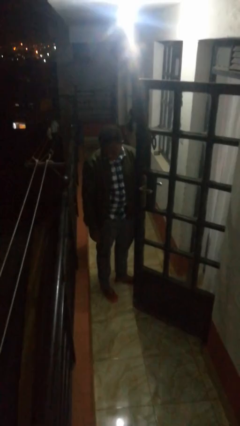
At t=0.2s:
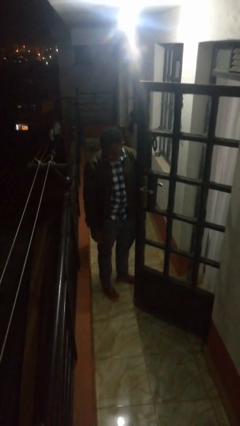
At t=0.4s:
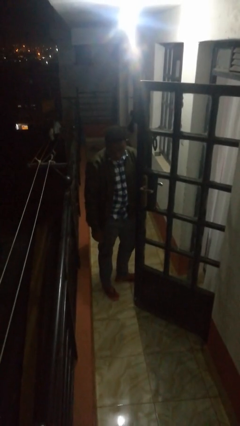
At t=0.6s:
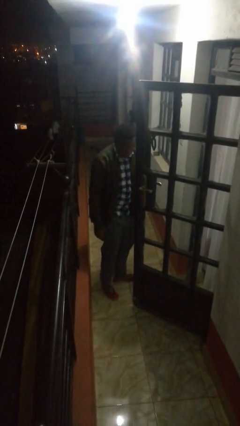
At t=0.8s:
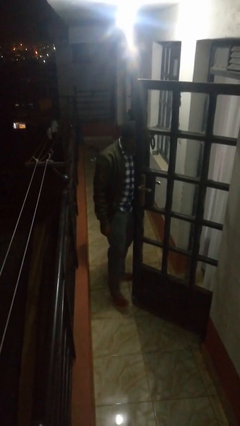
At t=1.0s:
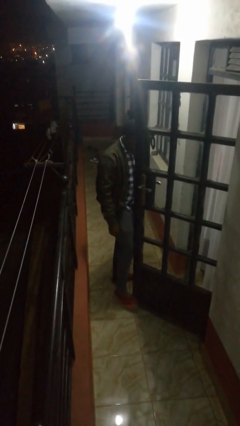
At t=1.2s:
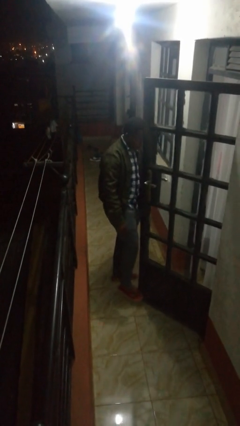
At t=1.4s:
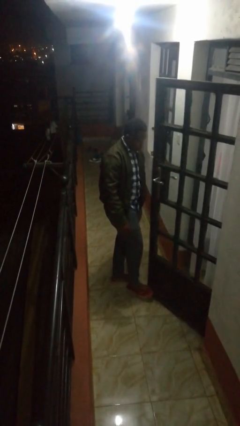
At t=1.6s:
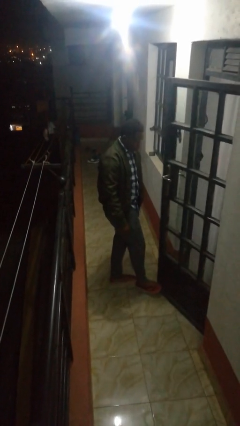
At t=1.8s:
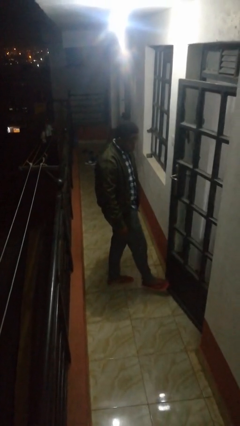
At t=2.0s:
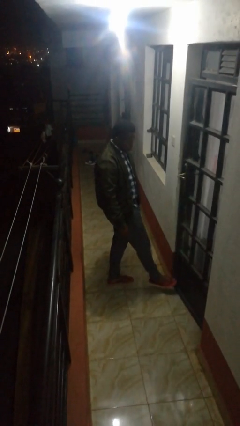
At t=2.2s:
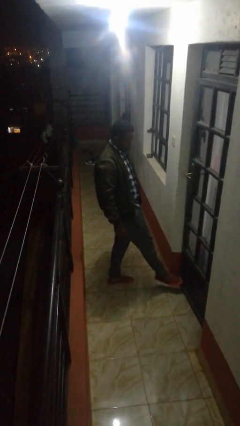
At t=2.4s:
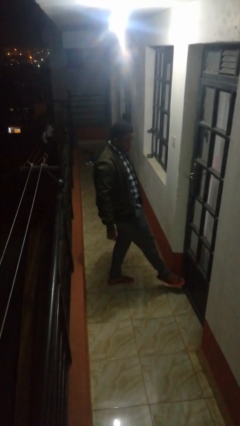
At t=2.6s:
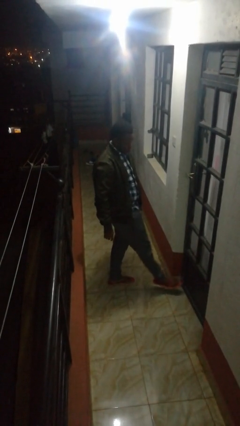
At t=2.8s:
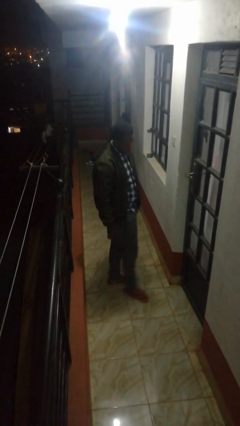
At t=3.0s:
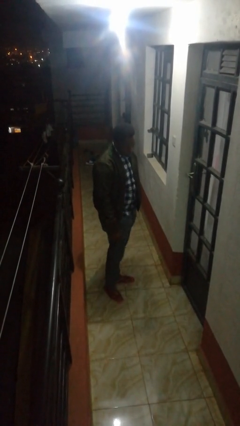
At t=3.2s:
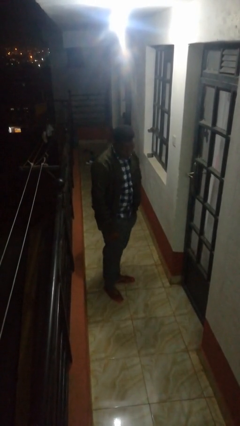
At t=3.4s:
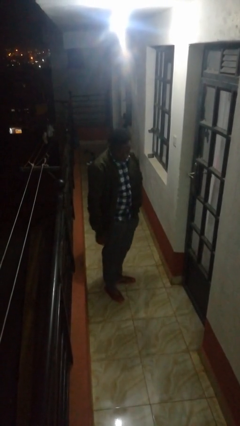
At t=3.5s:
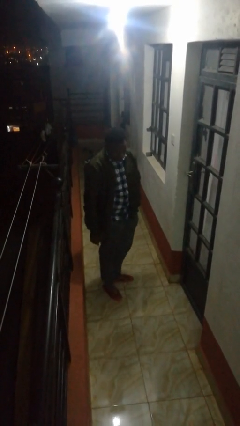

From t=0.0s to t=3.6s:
person closes door with foot

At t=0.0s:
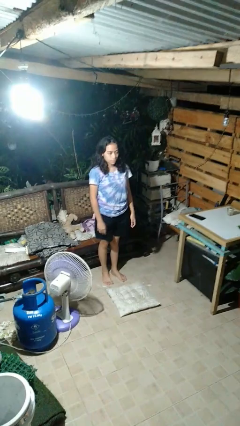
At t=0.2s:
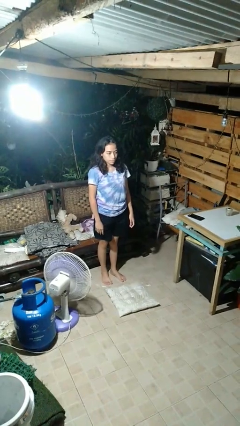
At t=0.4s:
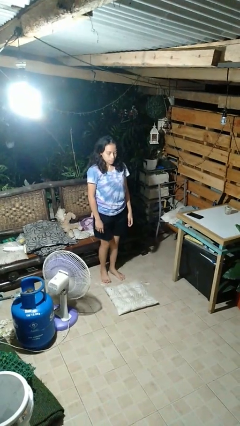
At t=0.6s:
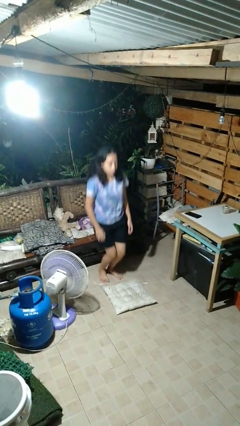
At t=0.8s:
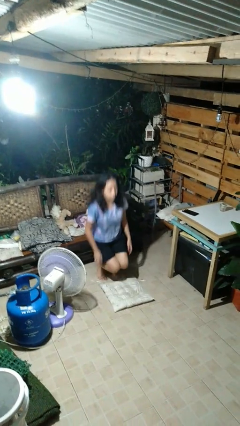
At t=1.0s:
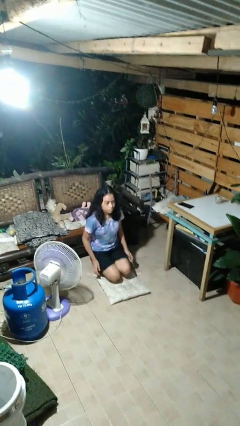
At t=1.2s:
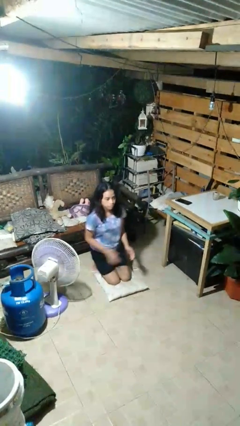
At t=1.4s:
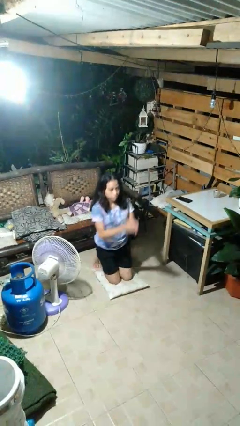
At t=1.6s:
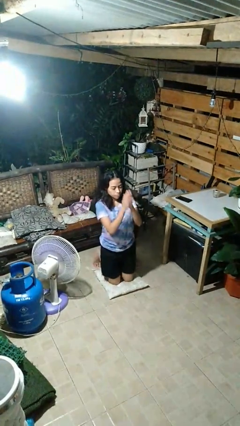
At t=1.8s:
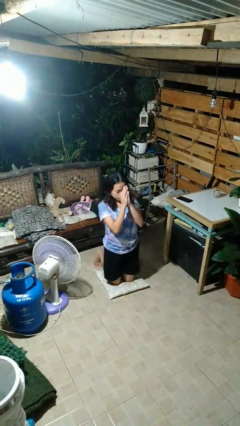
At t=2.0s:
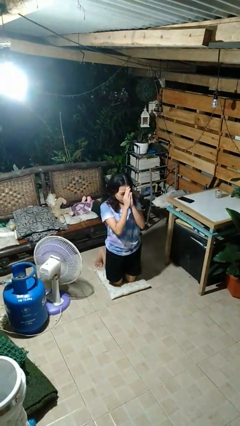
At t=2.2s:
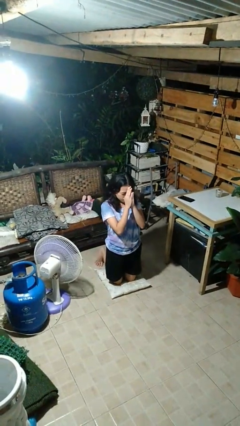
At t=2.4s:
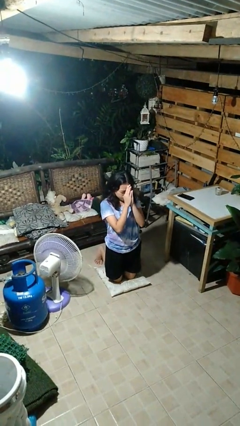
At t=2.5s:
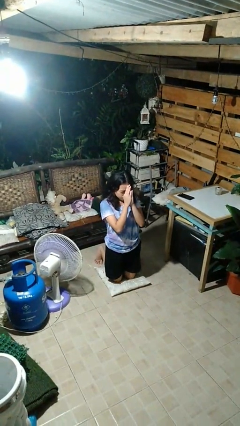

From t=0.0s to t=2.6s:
person prays

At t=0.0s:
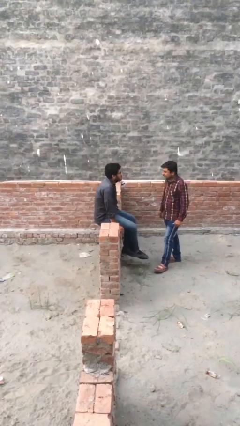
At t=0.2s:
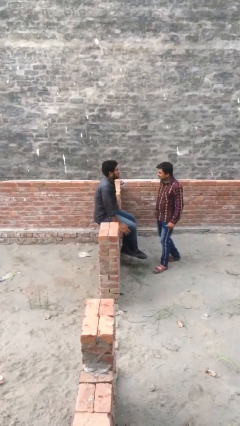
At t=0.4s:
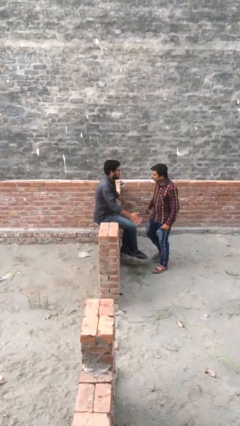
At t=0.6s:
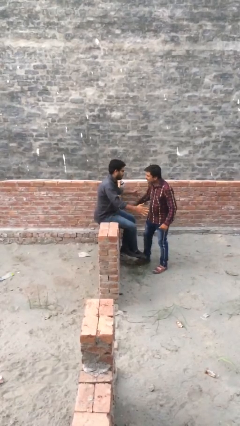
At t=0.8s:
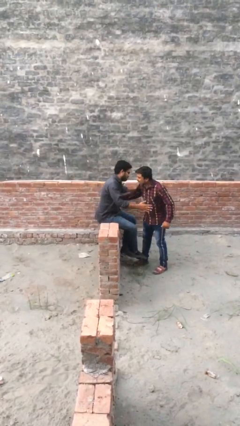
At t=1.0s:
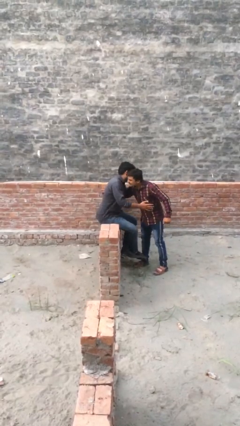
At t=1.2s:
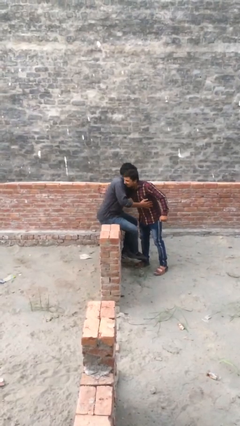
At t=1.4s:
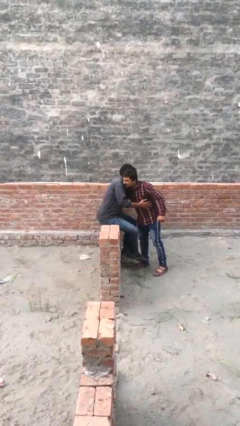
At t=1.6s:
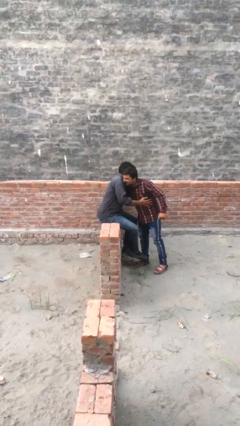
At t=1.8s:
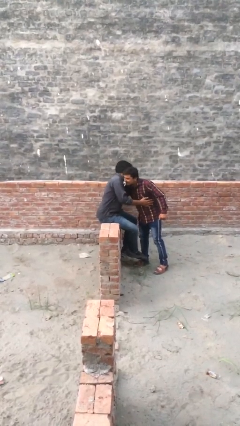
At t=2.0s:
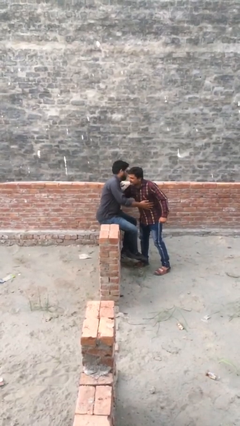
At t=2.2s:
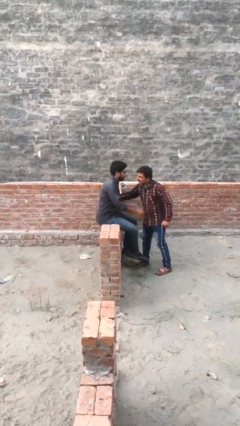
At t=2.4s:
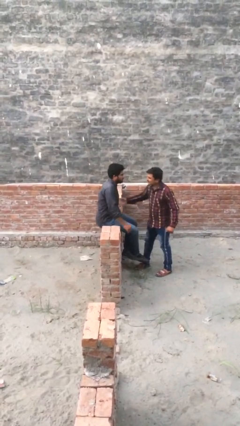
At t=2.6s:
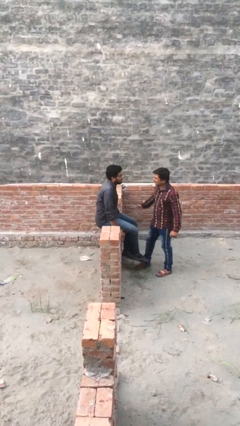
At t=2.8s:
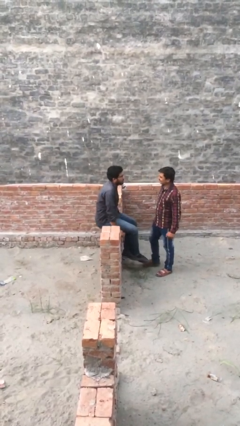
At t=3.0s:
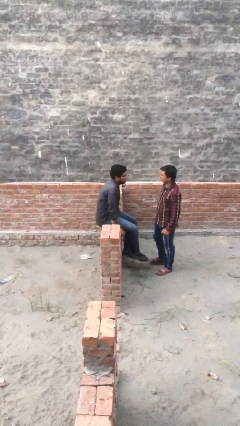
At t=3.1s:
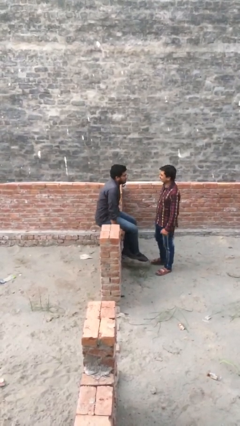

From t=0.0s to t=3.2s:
person embraces person

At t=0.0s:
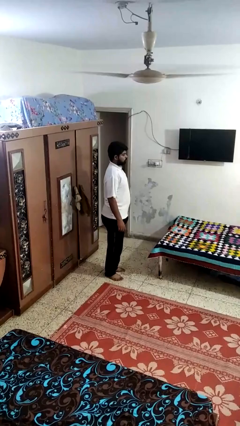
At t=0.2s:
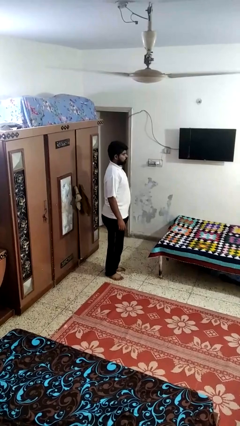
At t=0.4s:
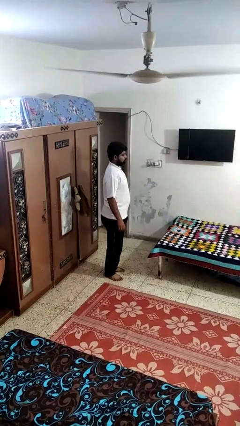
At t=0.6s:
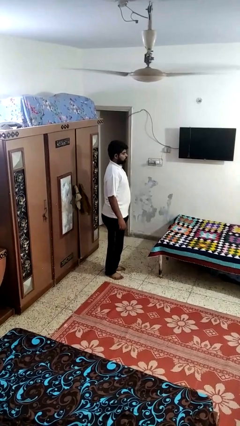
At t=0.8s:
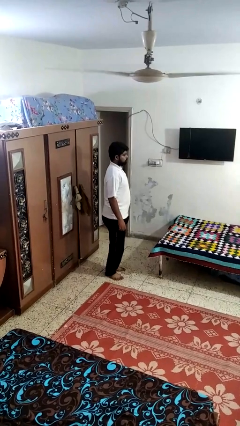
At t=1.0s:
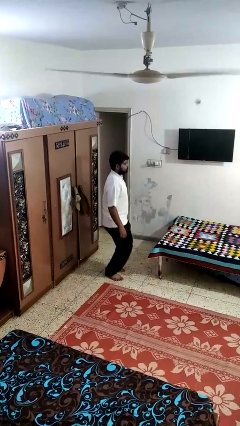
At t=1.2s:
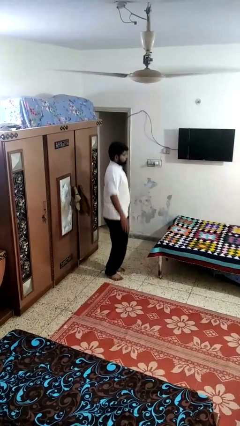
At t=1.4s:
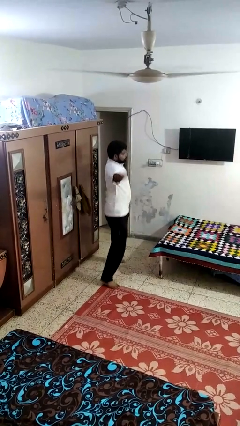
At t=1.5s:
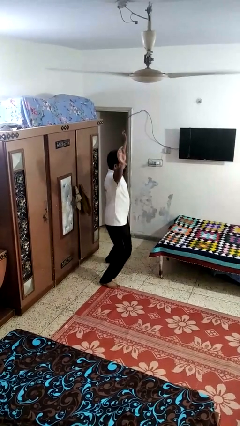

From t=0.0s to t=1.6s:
person exercises with jumping jacks

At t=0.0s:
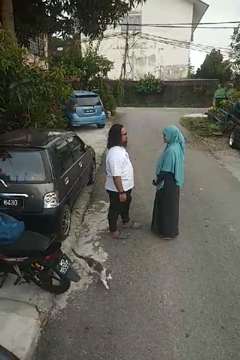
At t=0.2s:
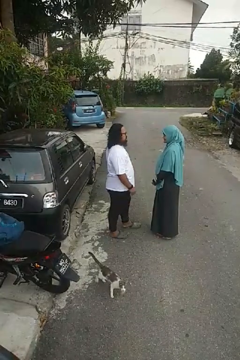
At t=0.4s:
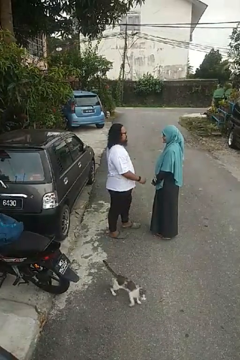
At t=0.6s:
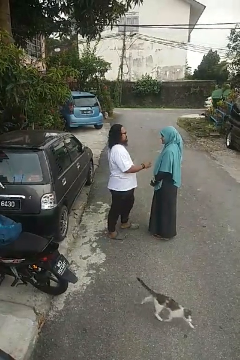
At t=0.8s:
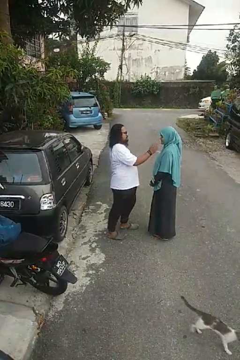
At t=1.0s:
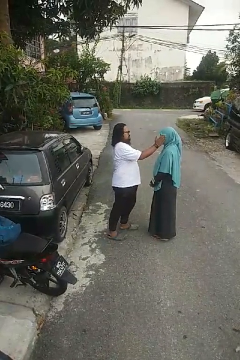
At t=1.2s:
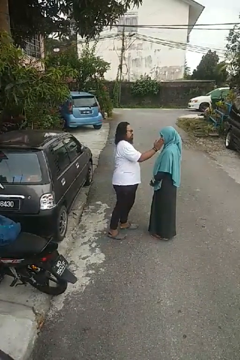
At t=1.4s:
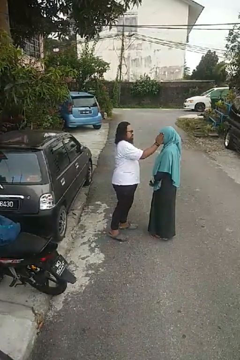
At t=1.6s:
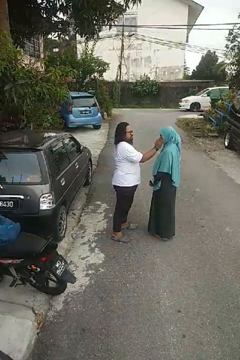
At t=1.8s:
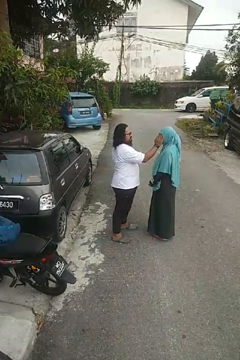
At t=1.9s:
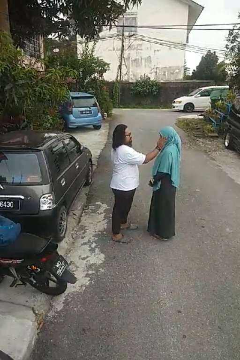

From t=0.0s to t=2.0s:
person touches face of person

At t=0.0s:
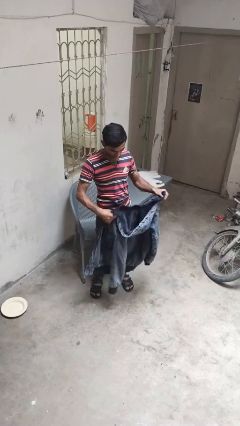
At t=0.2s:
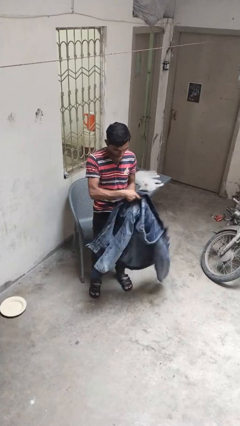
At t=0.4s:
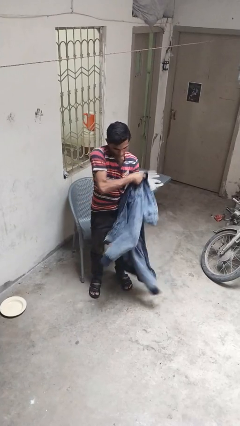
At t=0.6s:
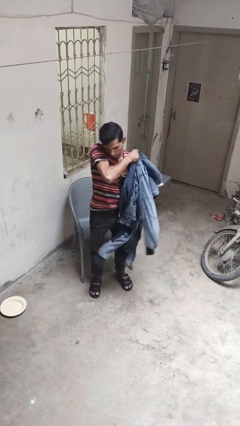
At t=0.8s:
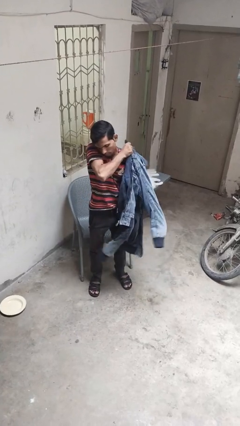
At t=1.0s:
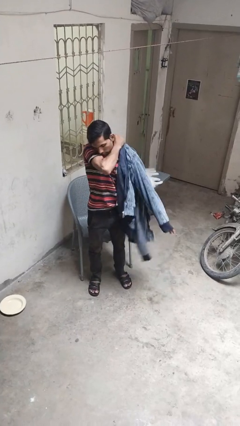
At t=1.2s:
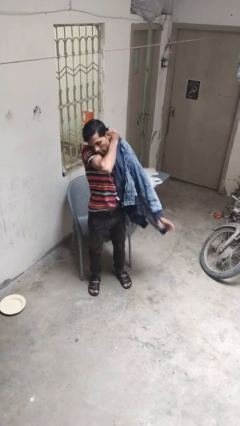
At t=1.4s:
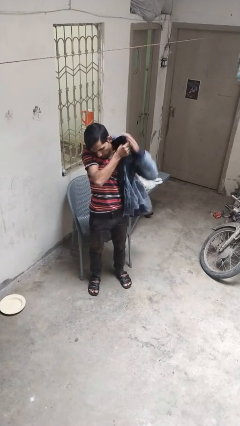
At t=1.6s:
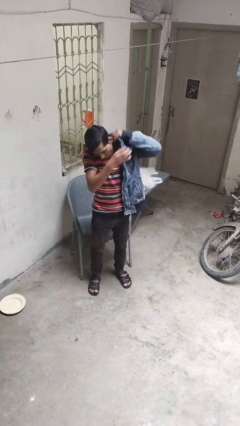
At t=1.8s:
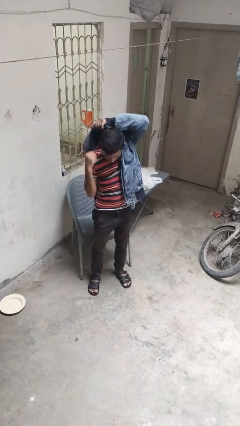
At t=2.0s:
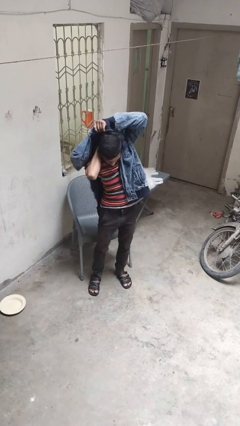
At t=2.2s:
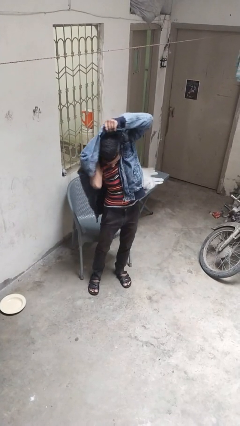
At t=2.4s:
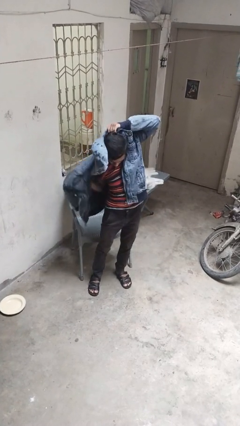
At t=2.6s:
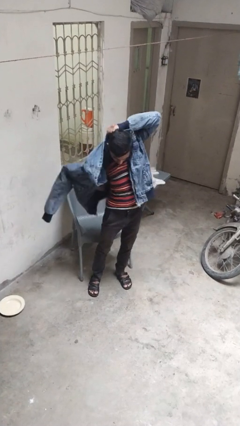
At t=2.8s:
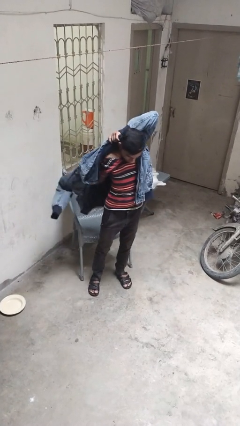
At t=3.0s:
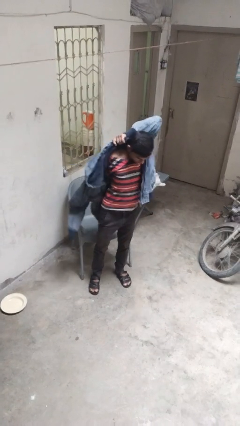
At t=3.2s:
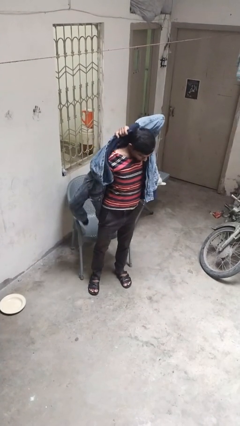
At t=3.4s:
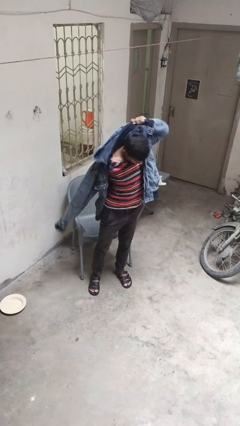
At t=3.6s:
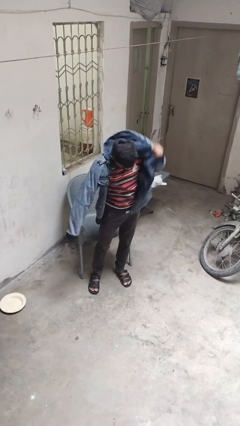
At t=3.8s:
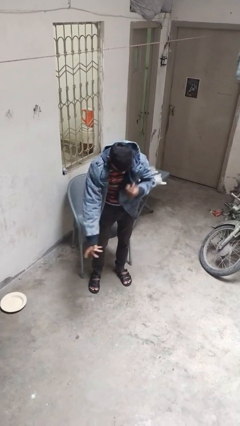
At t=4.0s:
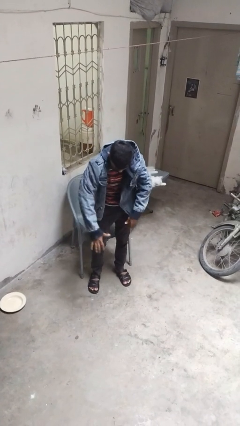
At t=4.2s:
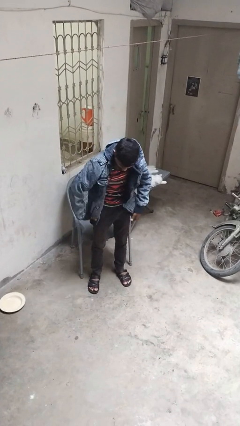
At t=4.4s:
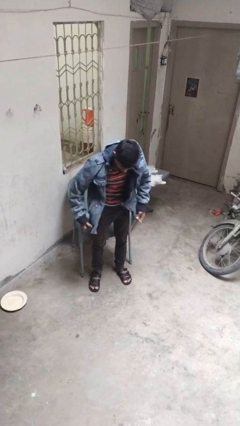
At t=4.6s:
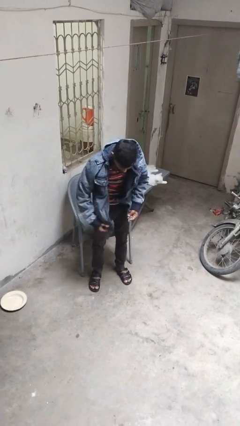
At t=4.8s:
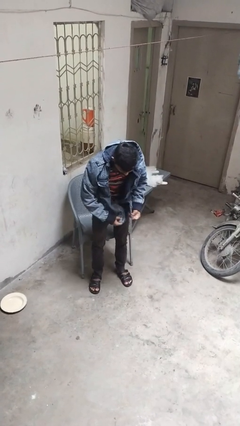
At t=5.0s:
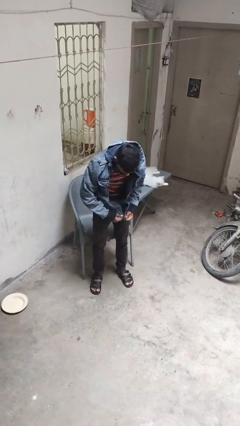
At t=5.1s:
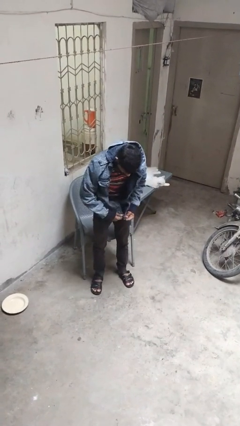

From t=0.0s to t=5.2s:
person puts on jacket
